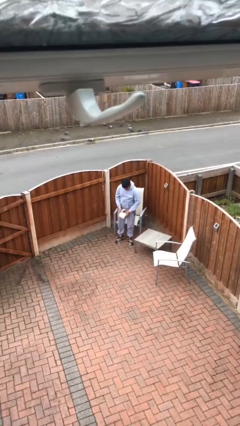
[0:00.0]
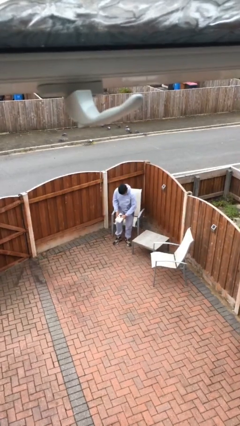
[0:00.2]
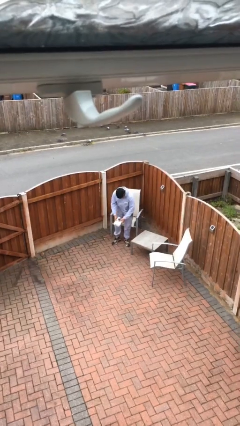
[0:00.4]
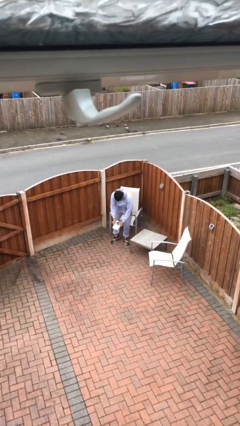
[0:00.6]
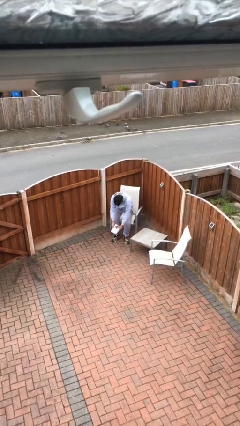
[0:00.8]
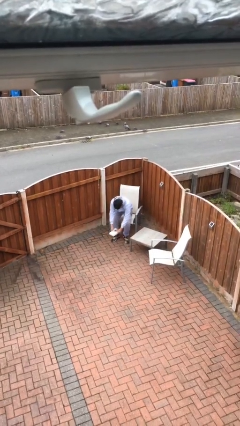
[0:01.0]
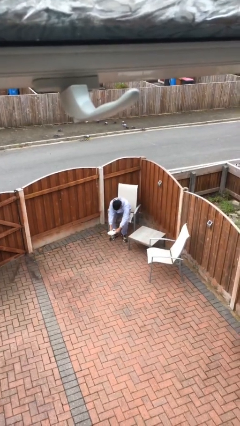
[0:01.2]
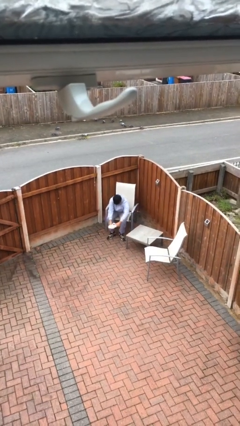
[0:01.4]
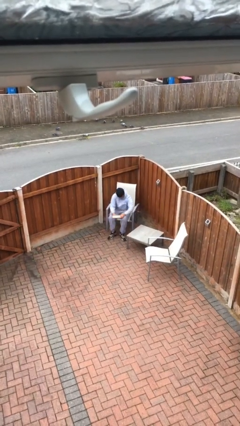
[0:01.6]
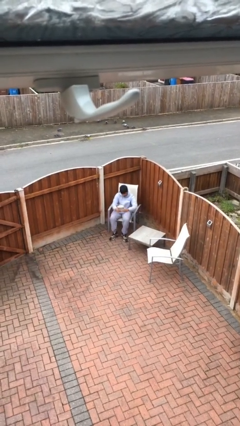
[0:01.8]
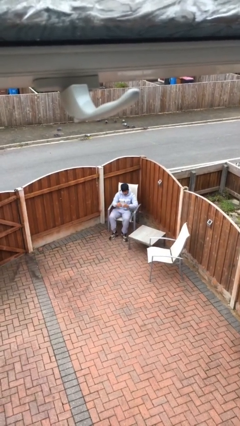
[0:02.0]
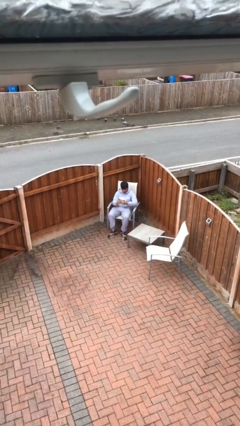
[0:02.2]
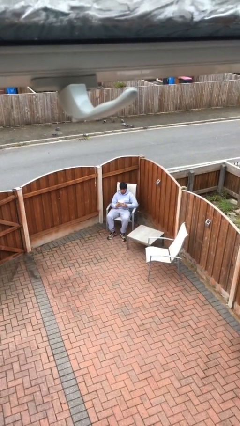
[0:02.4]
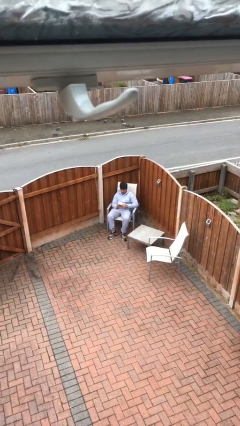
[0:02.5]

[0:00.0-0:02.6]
person sits down

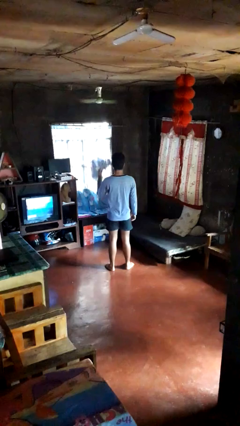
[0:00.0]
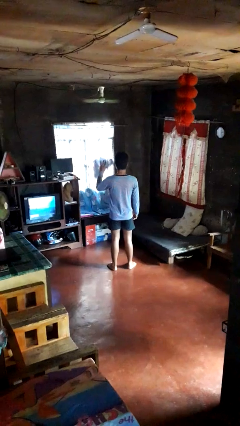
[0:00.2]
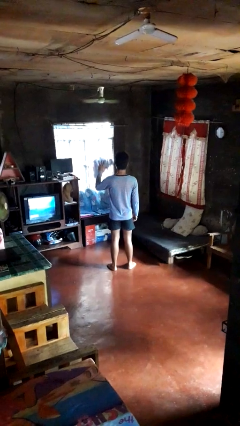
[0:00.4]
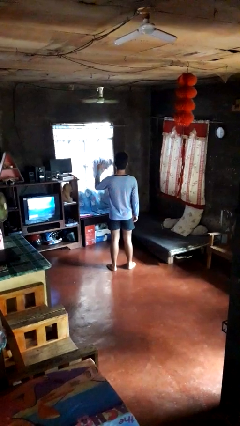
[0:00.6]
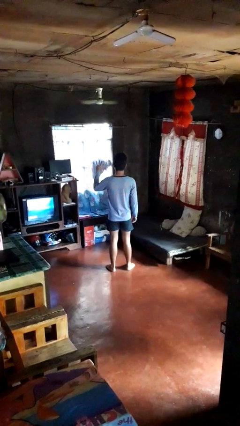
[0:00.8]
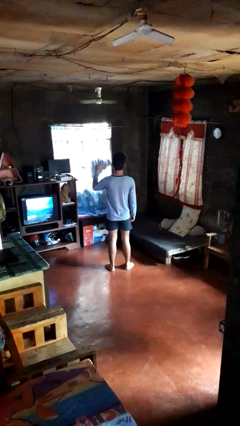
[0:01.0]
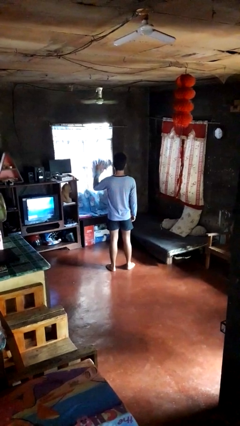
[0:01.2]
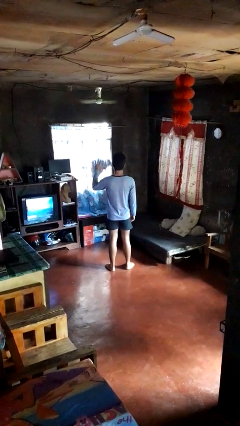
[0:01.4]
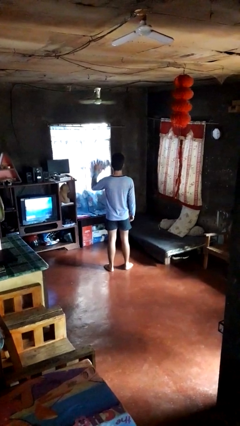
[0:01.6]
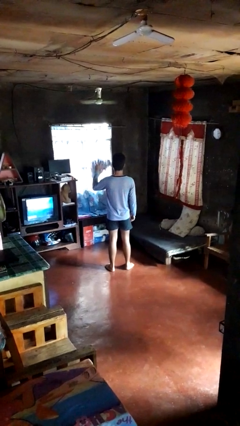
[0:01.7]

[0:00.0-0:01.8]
person gestures number three

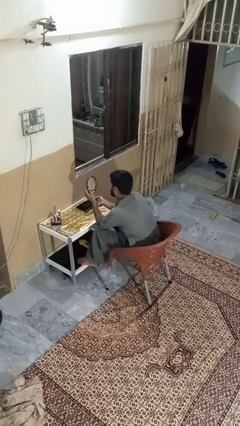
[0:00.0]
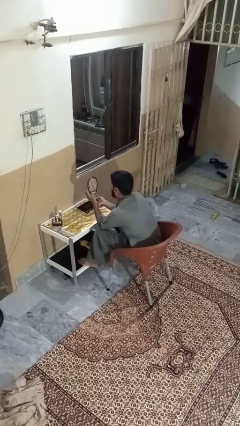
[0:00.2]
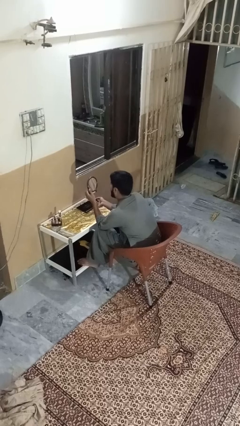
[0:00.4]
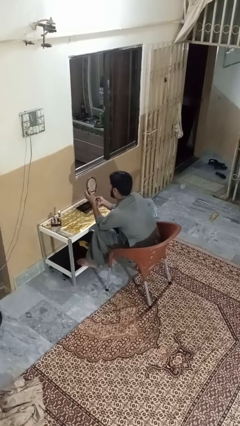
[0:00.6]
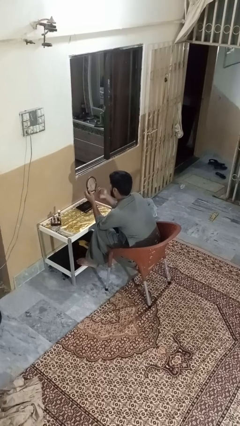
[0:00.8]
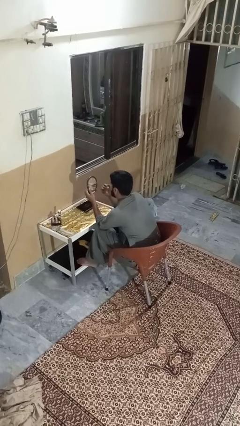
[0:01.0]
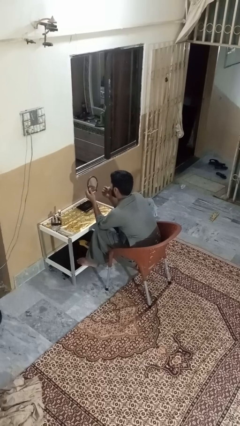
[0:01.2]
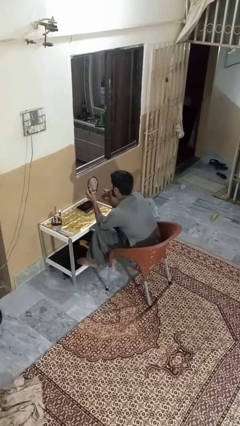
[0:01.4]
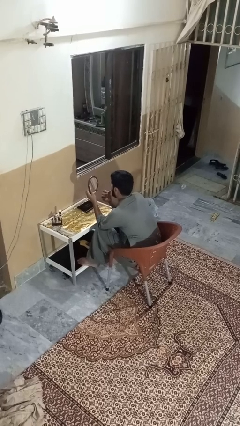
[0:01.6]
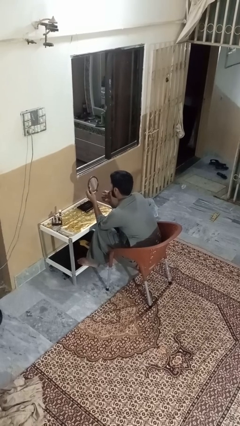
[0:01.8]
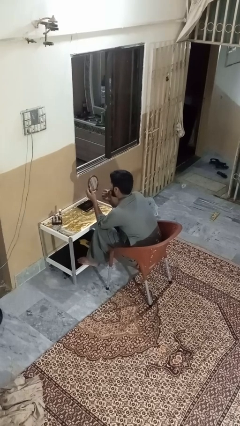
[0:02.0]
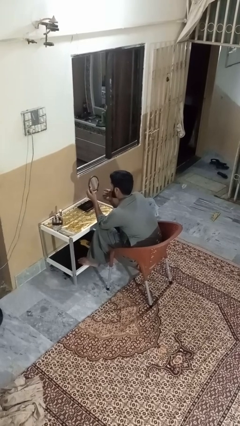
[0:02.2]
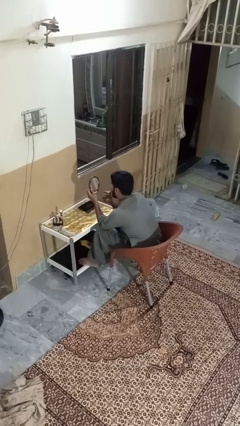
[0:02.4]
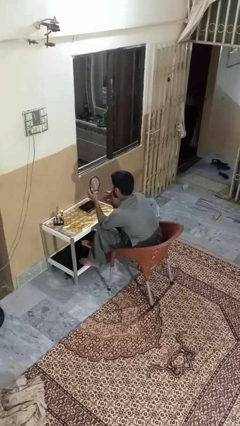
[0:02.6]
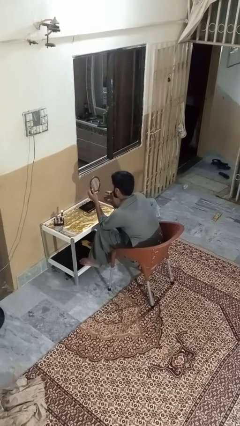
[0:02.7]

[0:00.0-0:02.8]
person applies lip makeup

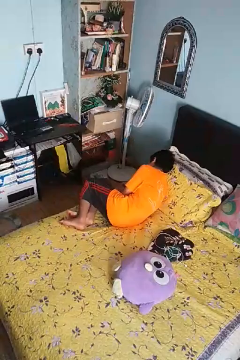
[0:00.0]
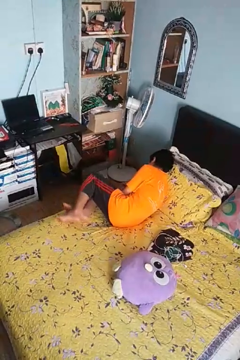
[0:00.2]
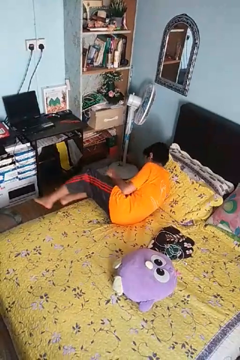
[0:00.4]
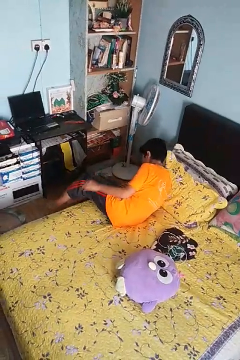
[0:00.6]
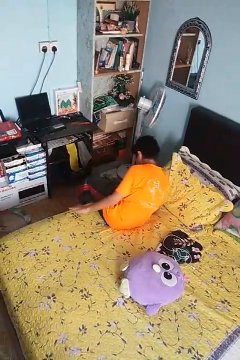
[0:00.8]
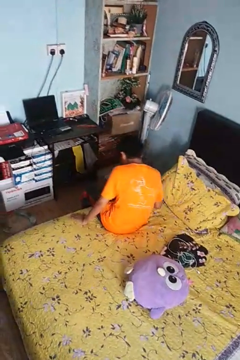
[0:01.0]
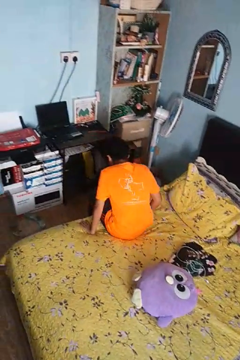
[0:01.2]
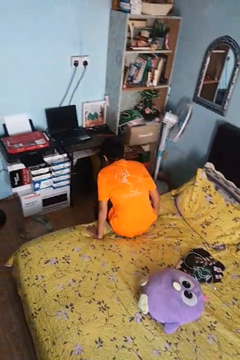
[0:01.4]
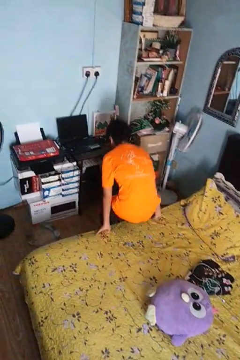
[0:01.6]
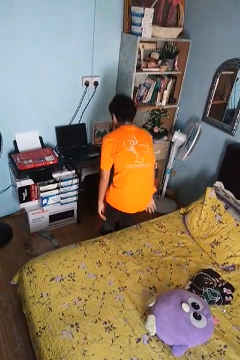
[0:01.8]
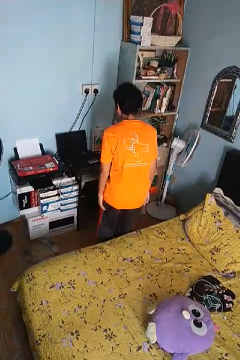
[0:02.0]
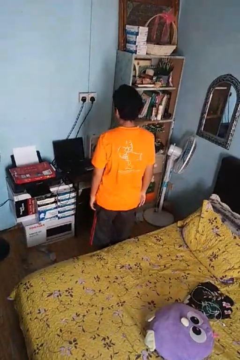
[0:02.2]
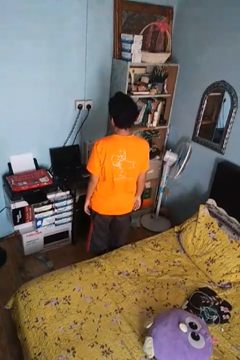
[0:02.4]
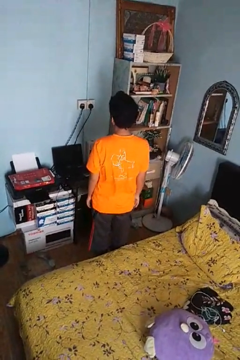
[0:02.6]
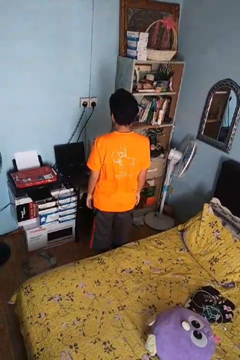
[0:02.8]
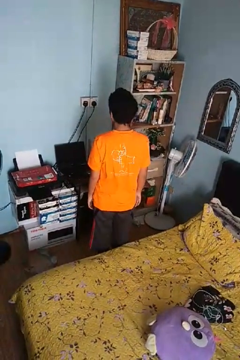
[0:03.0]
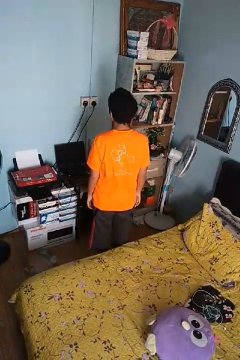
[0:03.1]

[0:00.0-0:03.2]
person stands up

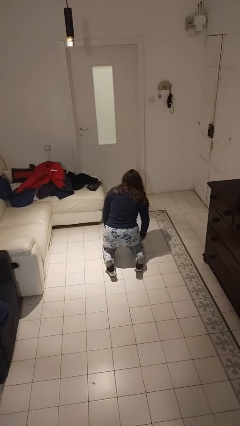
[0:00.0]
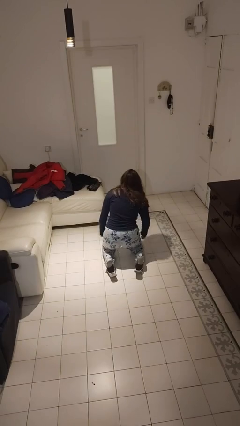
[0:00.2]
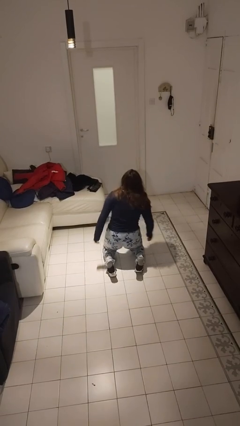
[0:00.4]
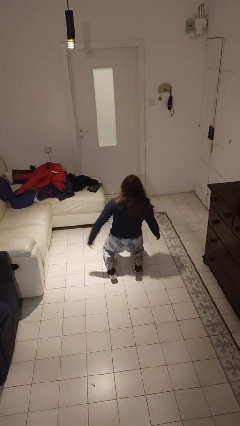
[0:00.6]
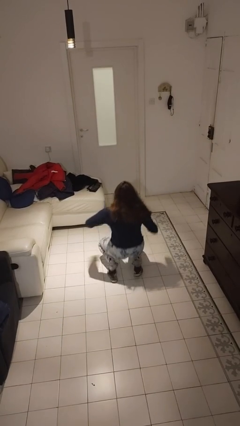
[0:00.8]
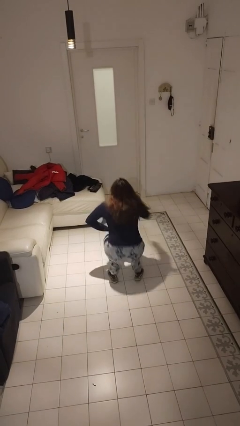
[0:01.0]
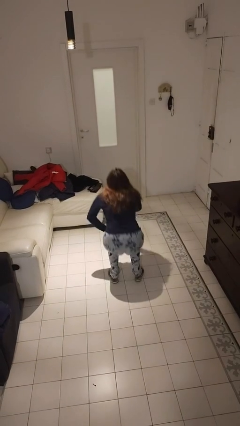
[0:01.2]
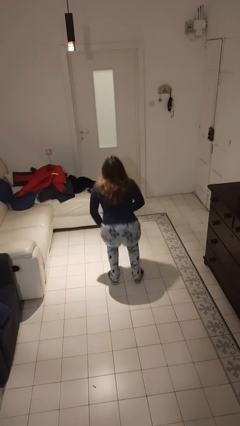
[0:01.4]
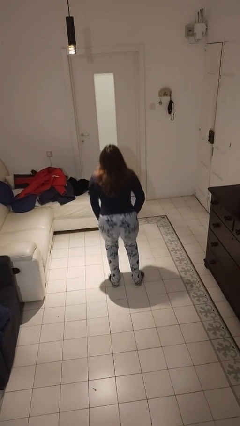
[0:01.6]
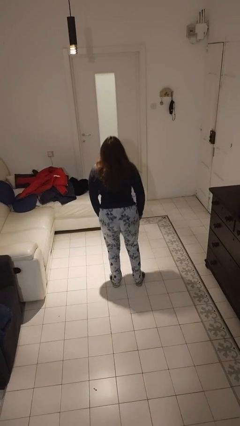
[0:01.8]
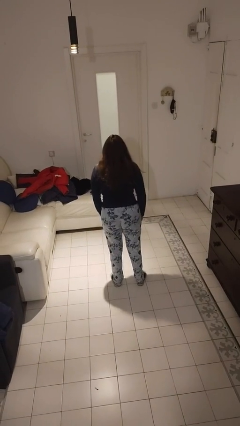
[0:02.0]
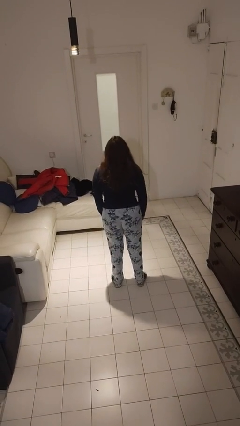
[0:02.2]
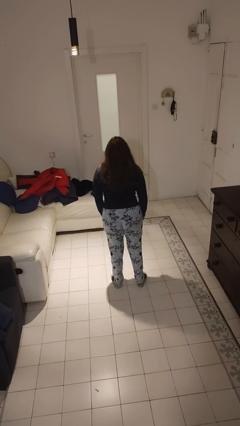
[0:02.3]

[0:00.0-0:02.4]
person stands up from floor

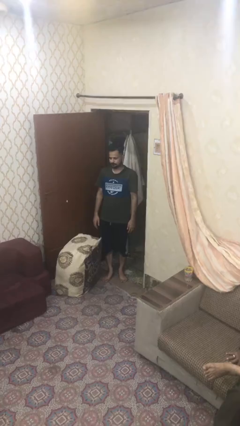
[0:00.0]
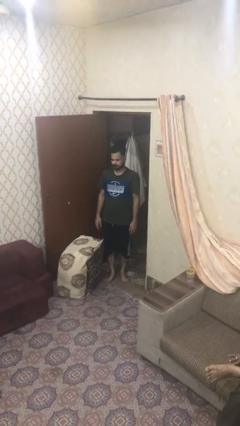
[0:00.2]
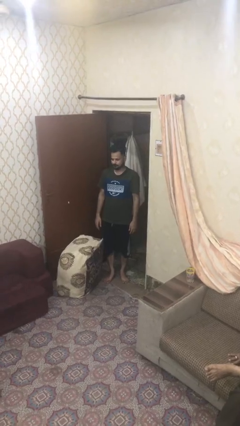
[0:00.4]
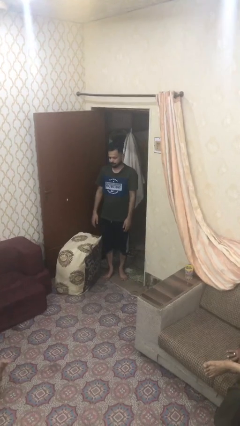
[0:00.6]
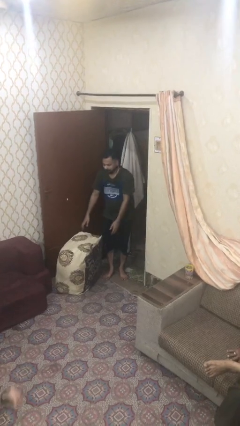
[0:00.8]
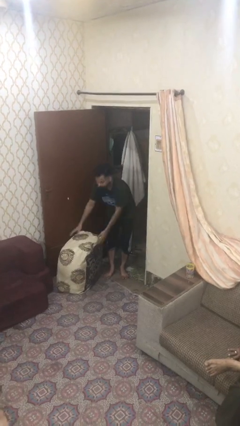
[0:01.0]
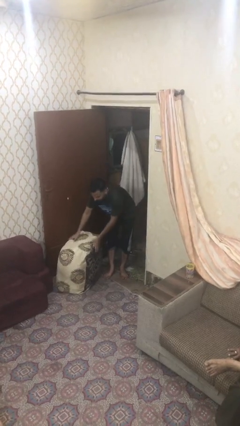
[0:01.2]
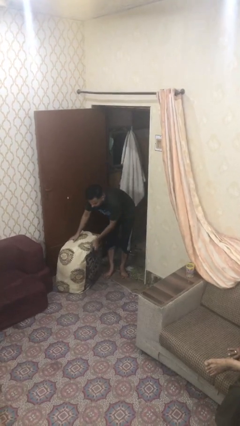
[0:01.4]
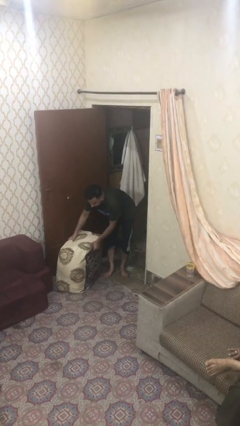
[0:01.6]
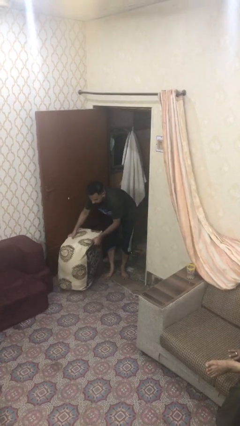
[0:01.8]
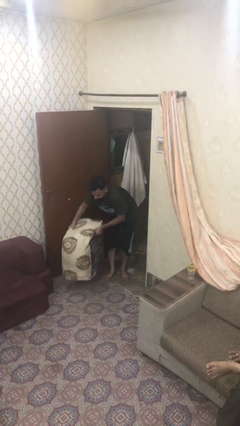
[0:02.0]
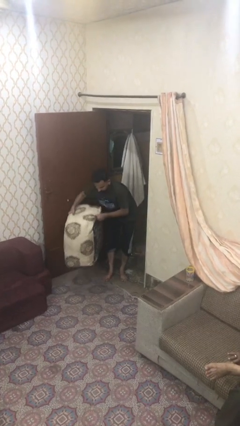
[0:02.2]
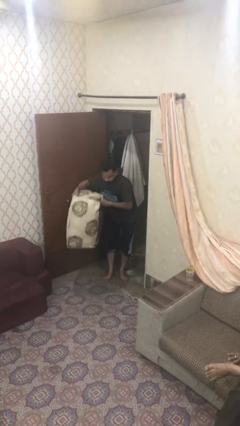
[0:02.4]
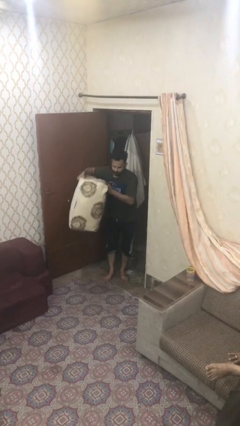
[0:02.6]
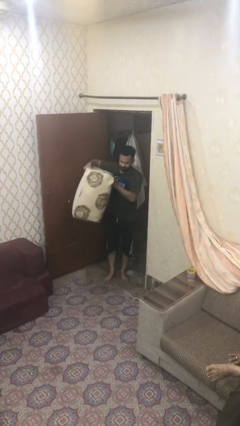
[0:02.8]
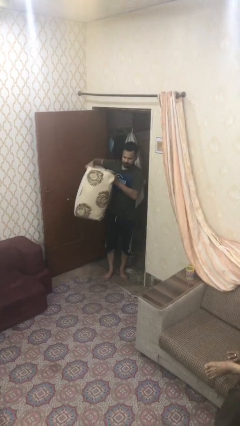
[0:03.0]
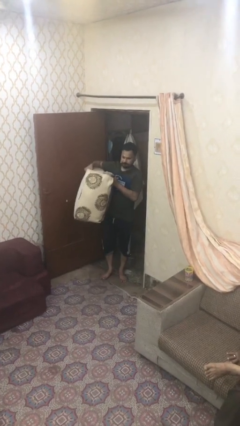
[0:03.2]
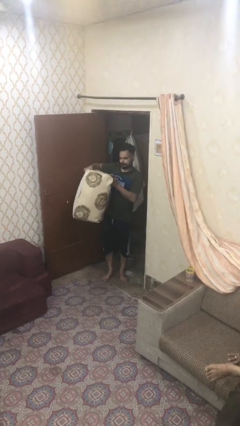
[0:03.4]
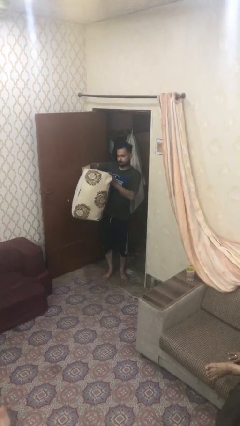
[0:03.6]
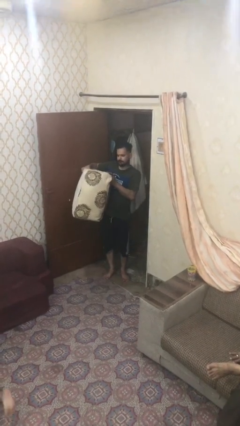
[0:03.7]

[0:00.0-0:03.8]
person carries heavy object

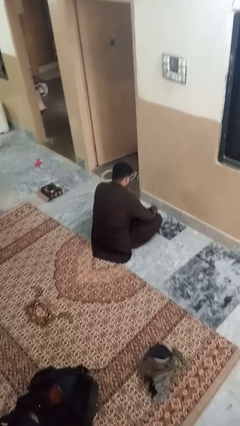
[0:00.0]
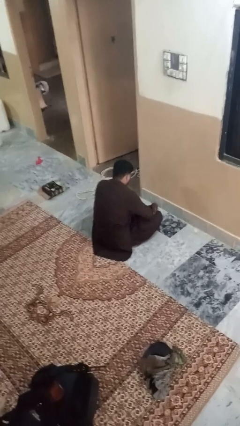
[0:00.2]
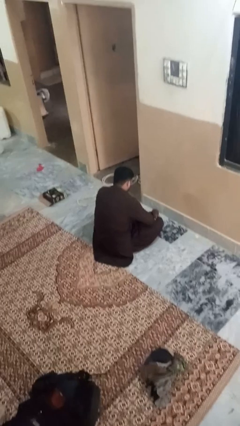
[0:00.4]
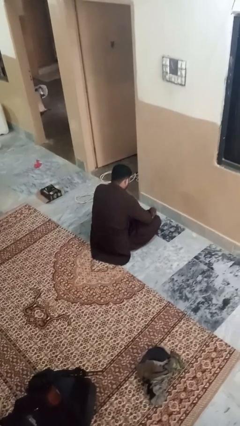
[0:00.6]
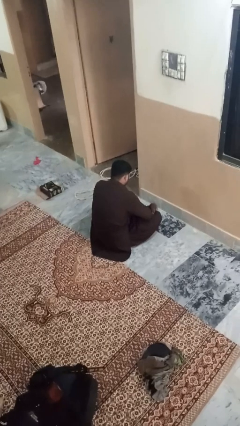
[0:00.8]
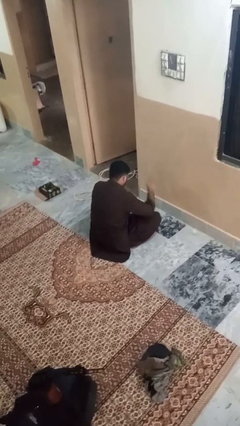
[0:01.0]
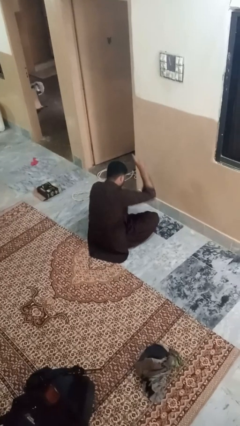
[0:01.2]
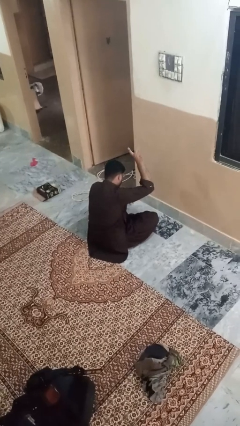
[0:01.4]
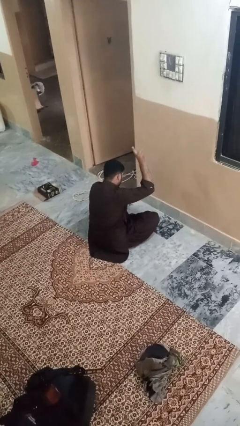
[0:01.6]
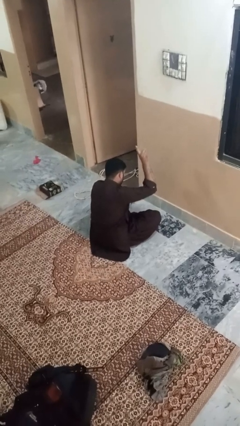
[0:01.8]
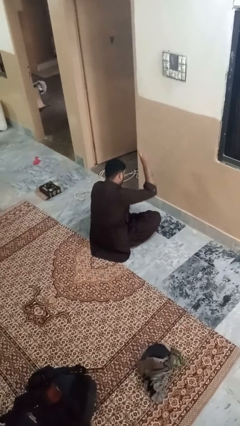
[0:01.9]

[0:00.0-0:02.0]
person gestures number one
